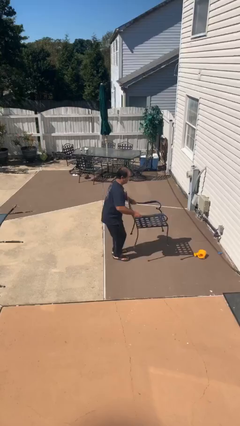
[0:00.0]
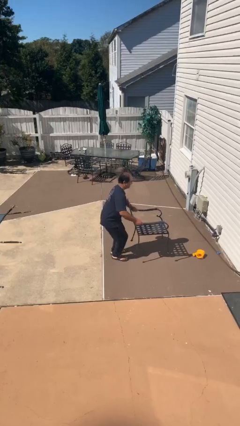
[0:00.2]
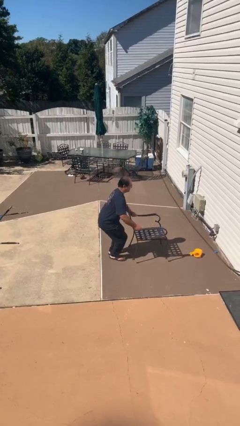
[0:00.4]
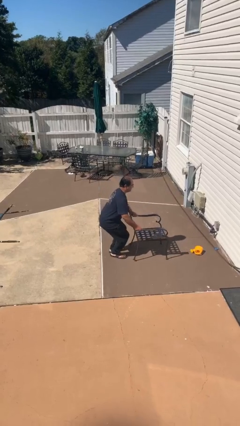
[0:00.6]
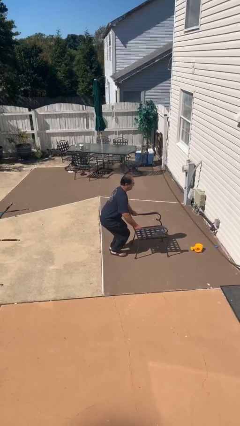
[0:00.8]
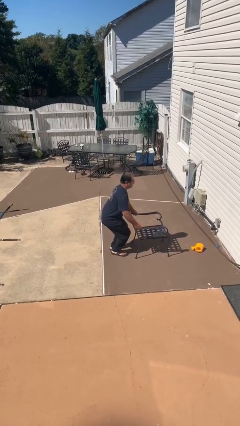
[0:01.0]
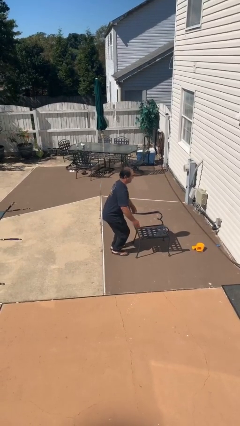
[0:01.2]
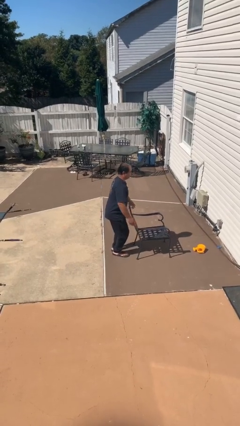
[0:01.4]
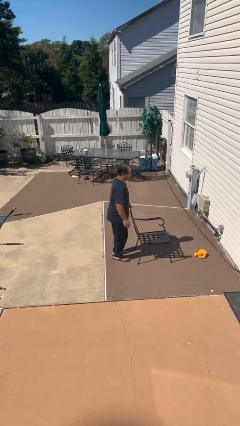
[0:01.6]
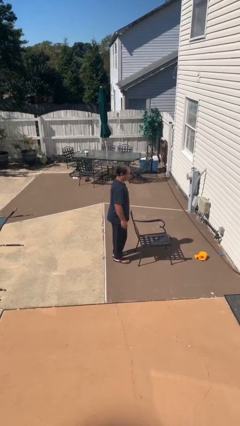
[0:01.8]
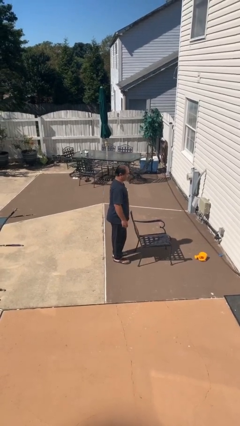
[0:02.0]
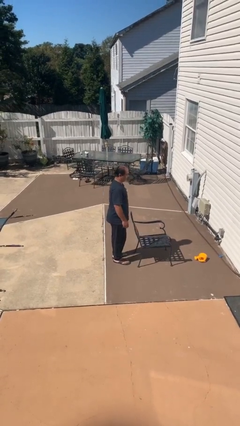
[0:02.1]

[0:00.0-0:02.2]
person puts down object on floor

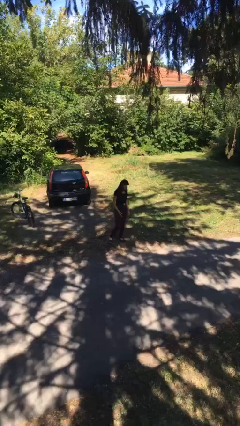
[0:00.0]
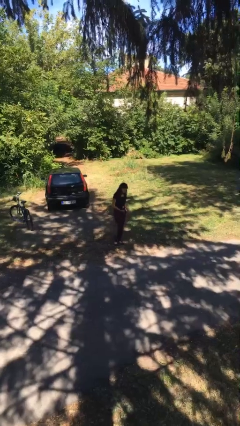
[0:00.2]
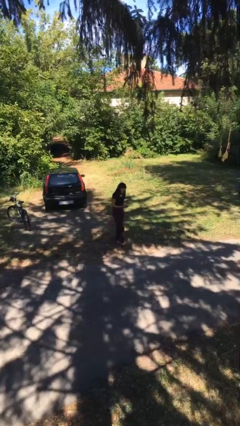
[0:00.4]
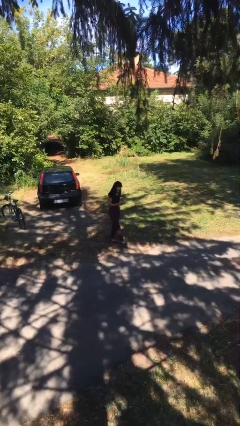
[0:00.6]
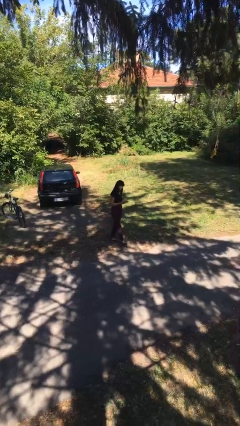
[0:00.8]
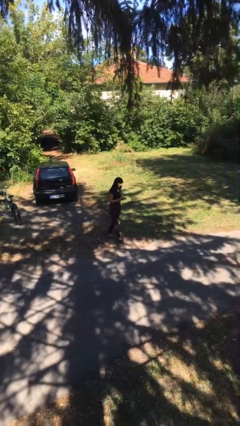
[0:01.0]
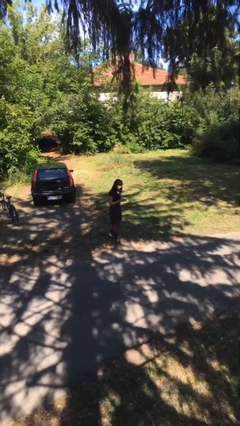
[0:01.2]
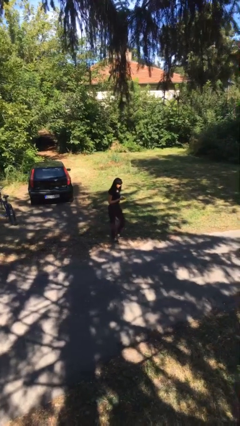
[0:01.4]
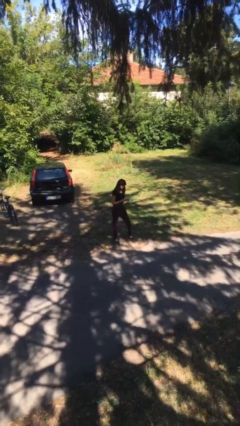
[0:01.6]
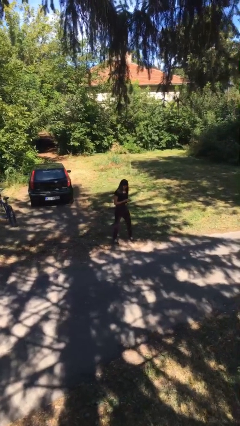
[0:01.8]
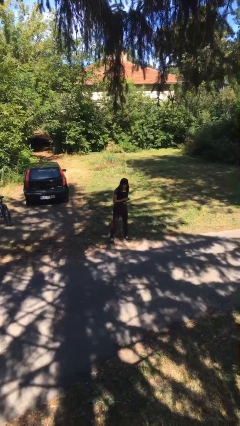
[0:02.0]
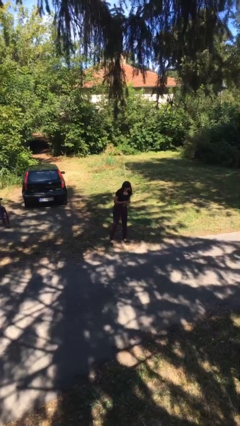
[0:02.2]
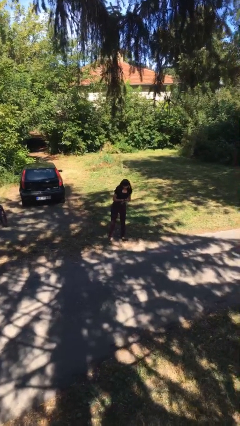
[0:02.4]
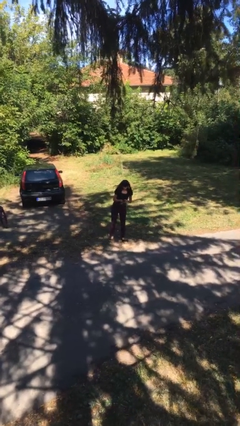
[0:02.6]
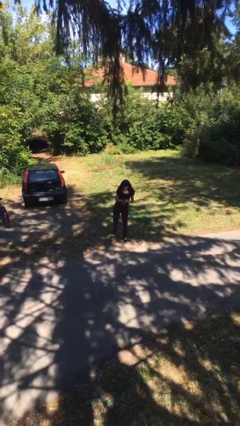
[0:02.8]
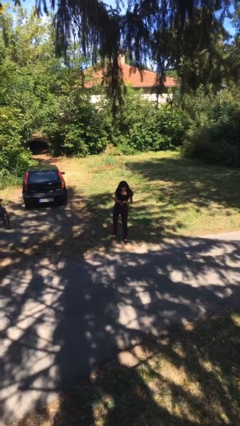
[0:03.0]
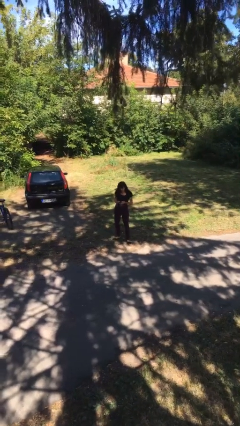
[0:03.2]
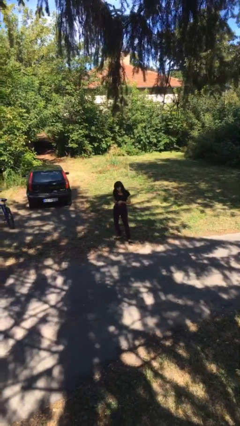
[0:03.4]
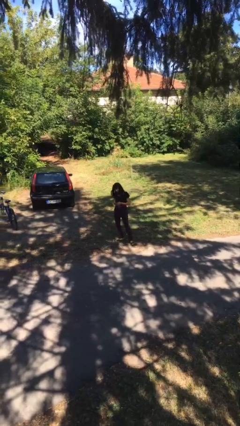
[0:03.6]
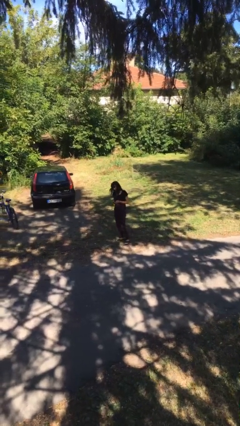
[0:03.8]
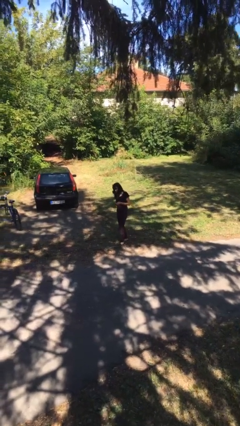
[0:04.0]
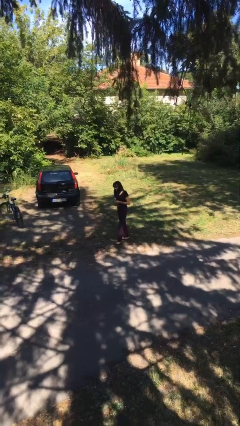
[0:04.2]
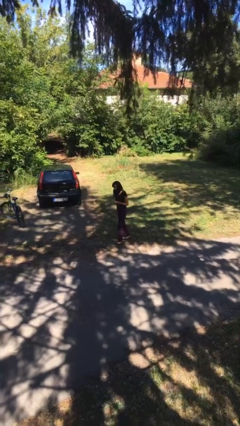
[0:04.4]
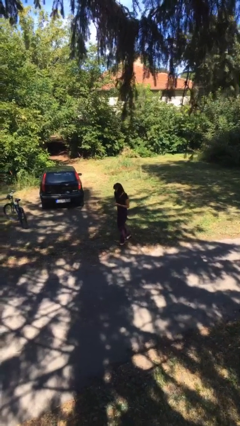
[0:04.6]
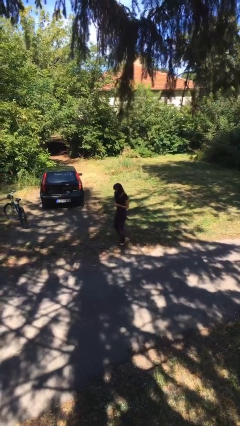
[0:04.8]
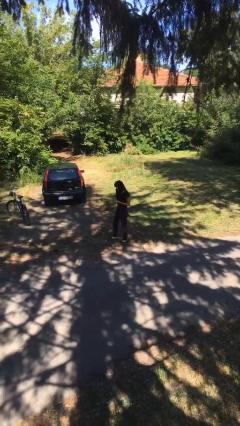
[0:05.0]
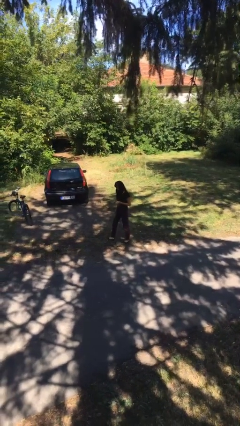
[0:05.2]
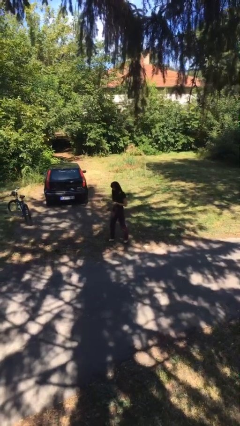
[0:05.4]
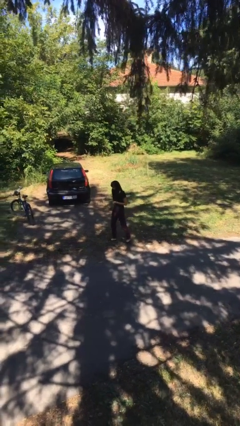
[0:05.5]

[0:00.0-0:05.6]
person texts on phone

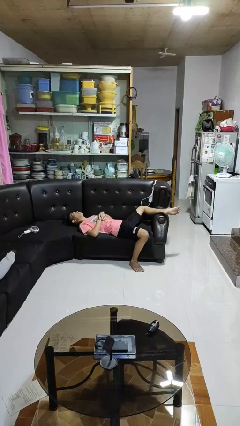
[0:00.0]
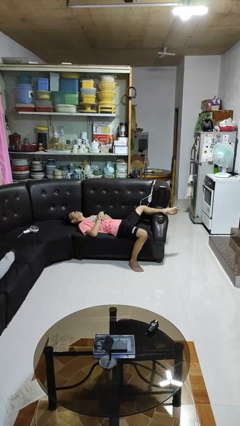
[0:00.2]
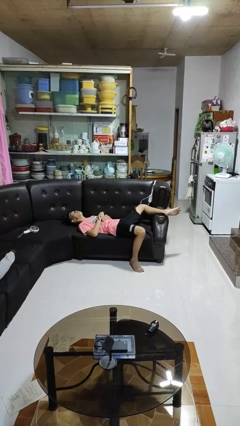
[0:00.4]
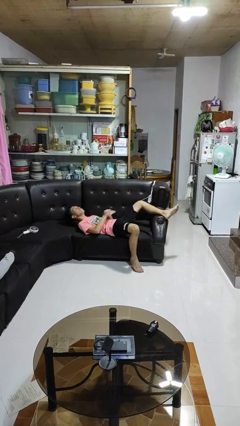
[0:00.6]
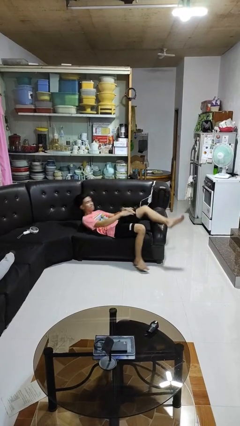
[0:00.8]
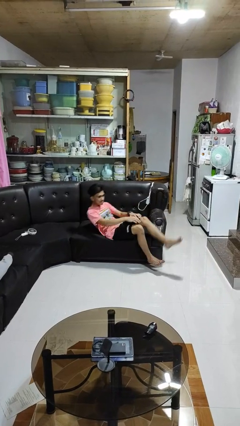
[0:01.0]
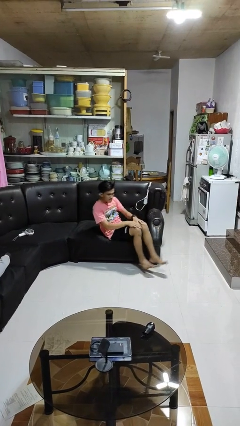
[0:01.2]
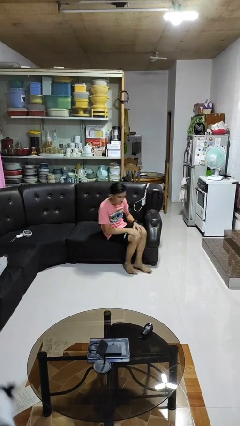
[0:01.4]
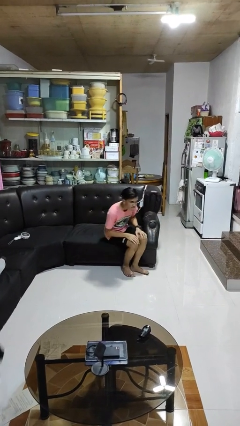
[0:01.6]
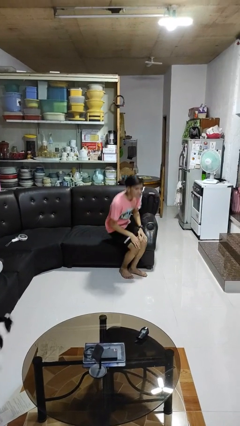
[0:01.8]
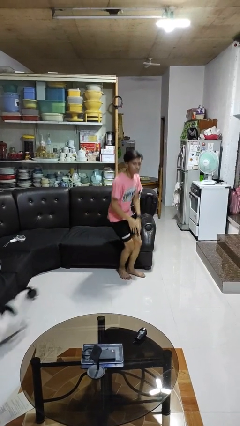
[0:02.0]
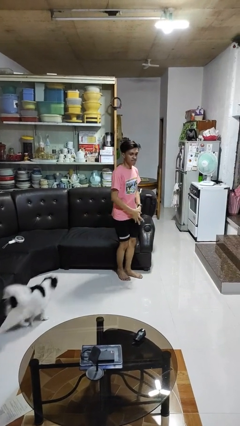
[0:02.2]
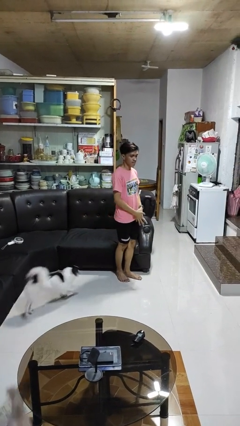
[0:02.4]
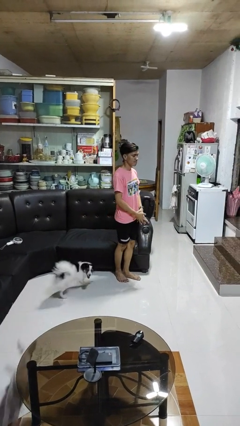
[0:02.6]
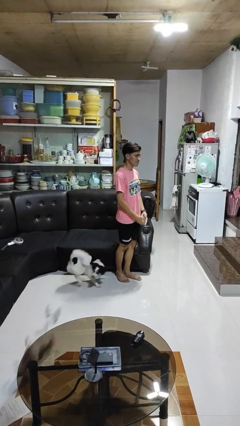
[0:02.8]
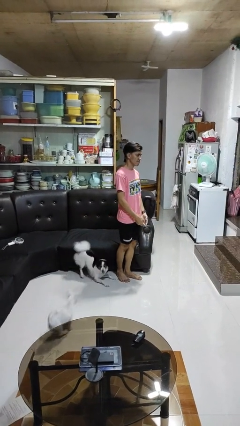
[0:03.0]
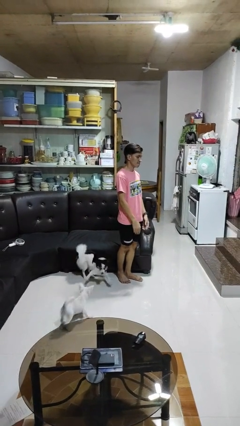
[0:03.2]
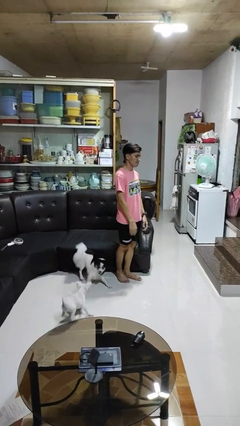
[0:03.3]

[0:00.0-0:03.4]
person stands up

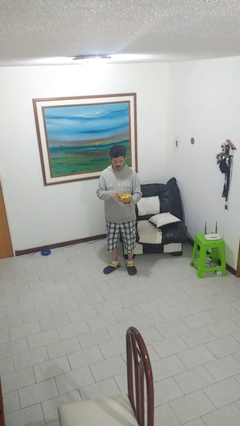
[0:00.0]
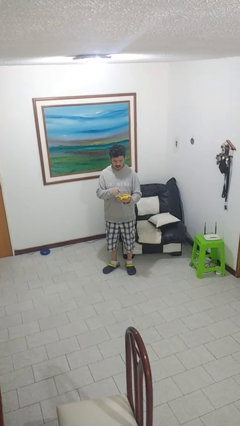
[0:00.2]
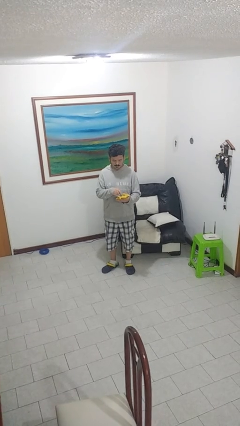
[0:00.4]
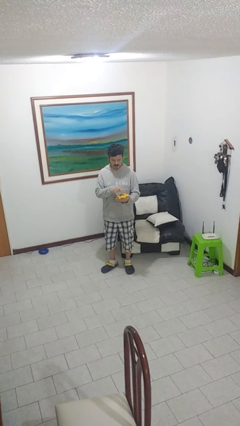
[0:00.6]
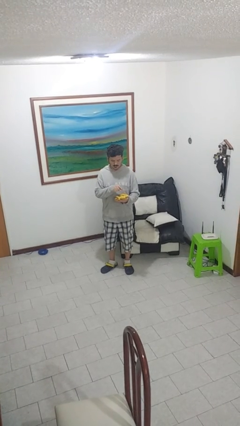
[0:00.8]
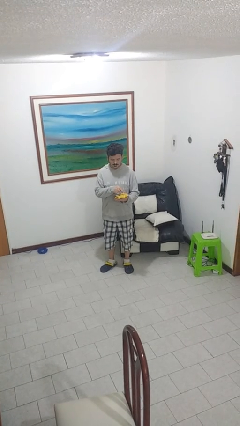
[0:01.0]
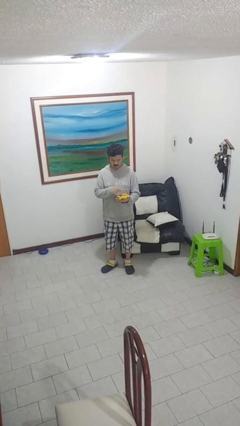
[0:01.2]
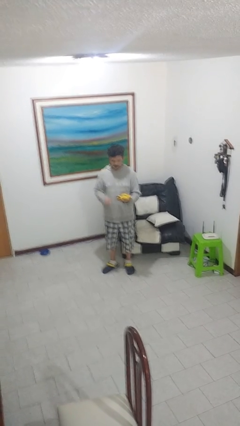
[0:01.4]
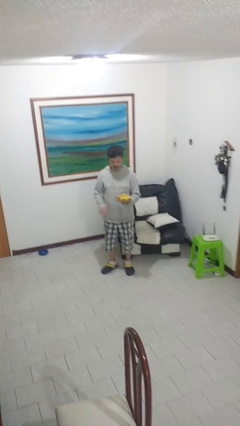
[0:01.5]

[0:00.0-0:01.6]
person taps object with finger

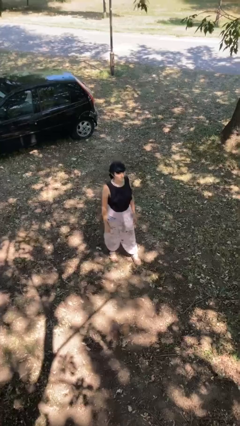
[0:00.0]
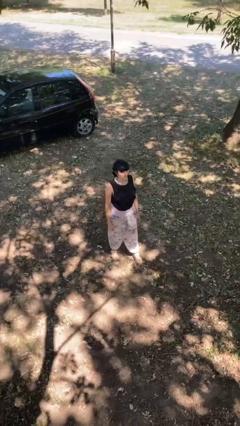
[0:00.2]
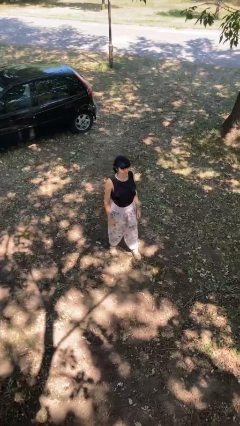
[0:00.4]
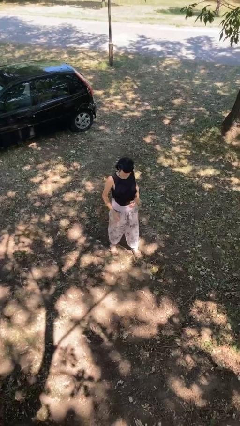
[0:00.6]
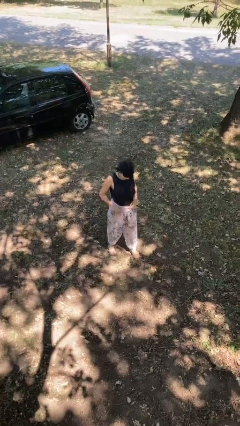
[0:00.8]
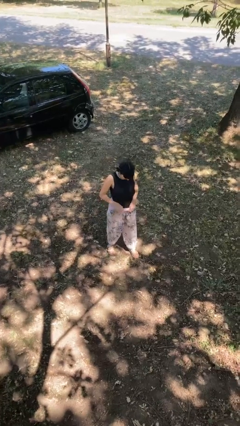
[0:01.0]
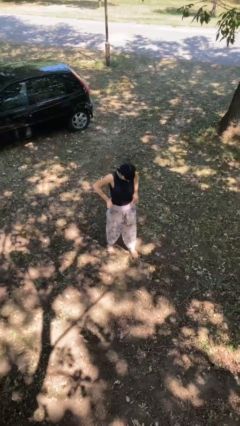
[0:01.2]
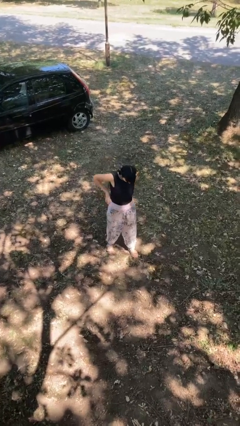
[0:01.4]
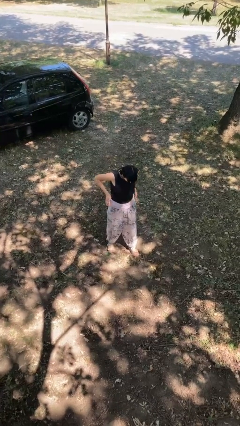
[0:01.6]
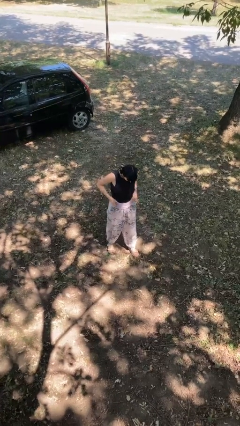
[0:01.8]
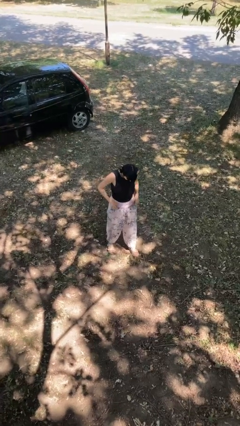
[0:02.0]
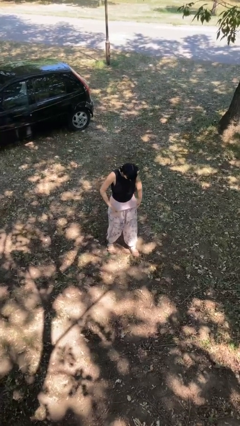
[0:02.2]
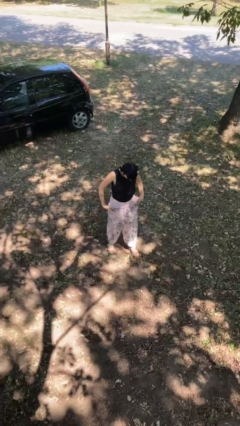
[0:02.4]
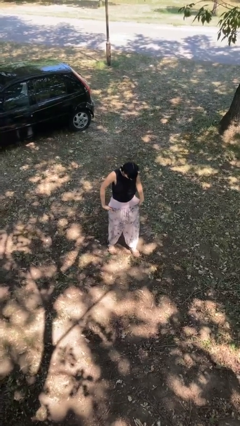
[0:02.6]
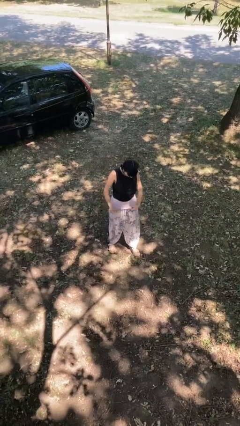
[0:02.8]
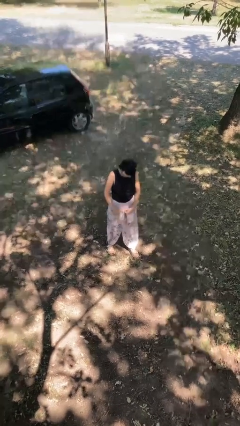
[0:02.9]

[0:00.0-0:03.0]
person hikes up pants

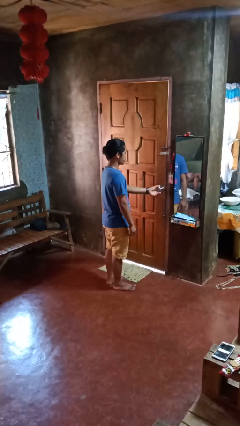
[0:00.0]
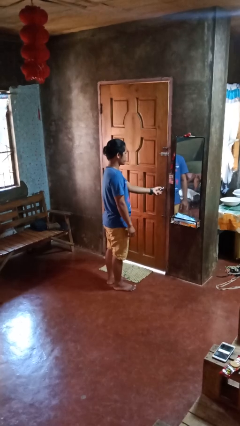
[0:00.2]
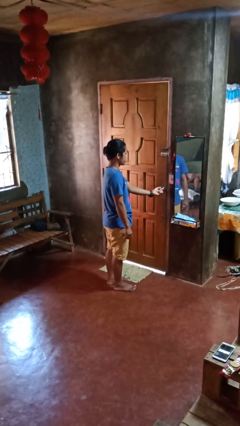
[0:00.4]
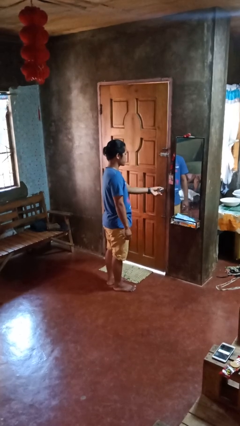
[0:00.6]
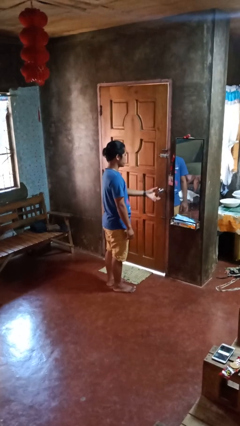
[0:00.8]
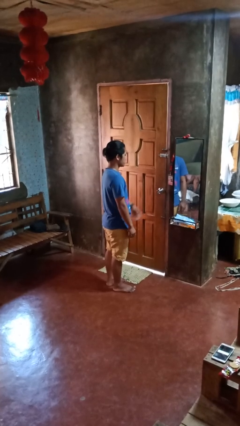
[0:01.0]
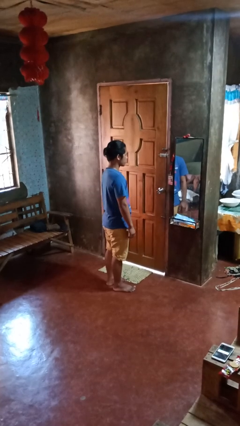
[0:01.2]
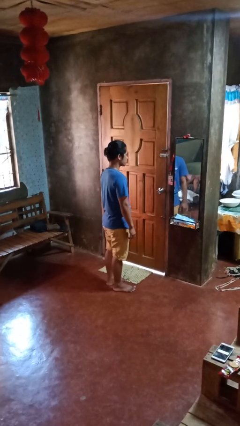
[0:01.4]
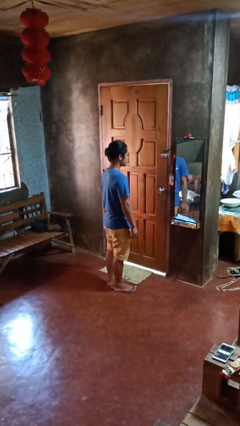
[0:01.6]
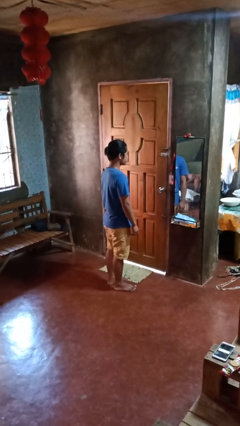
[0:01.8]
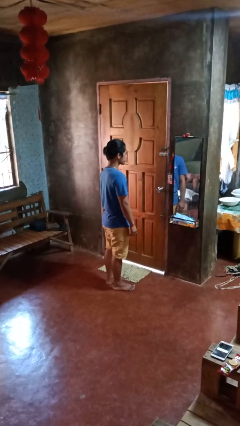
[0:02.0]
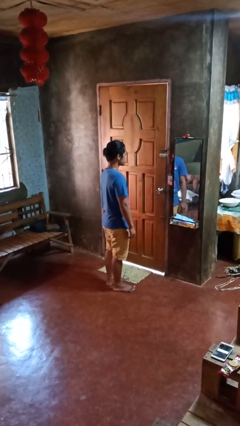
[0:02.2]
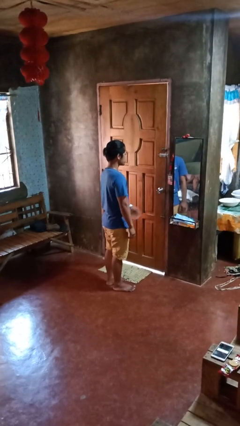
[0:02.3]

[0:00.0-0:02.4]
person unlocks door with keys
